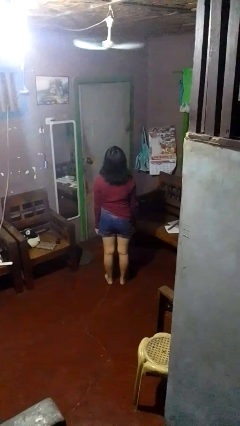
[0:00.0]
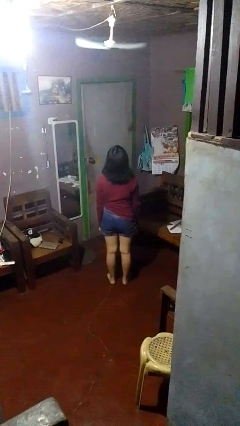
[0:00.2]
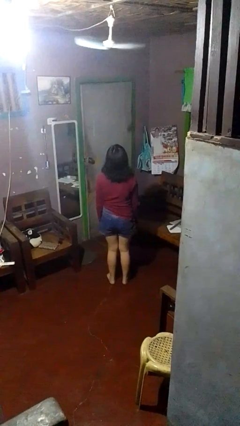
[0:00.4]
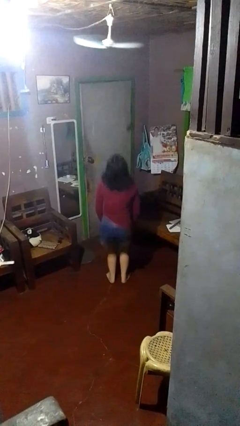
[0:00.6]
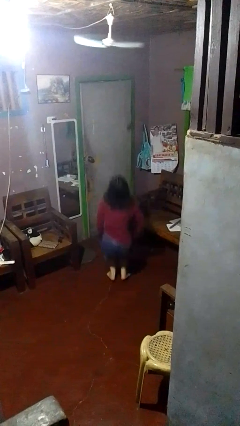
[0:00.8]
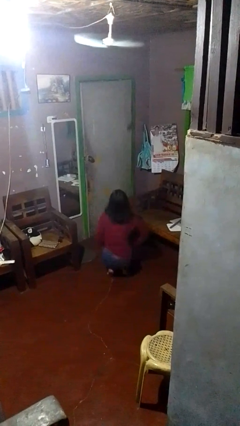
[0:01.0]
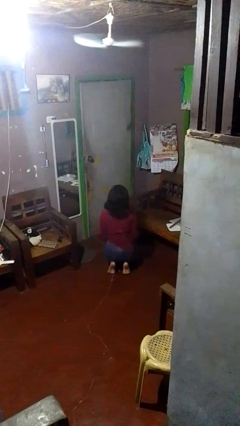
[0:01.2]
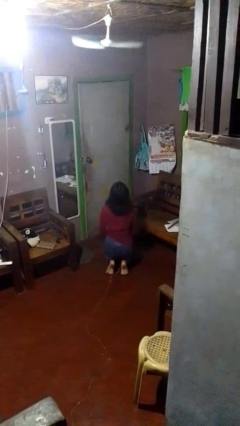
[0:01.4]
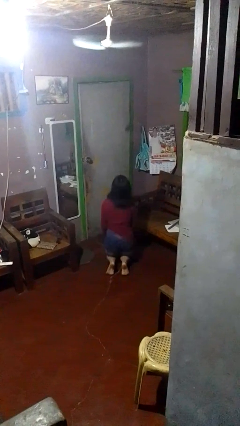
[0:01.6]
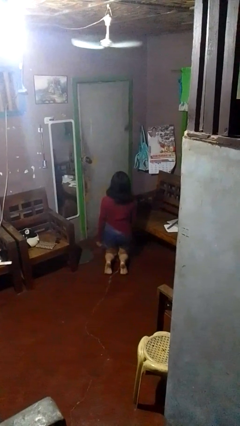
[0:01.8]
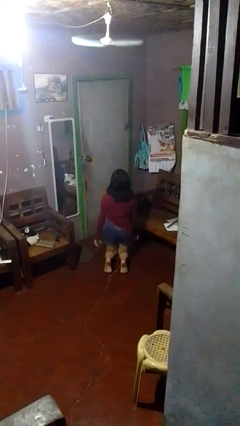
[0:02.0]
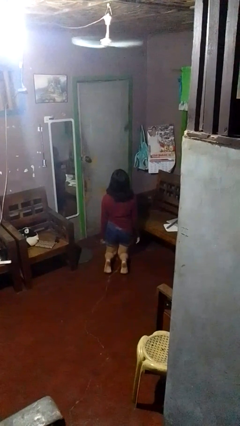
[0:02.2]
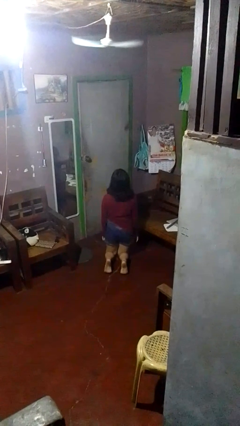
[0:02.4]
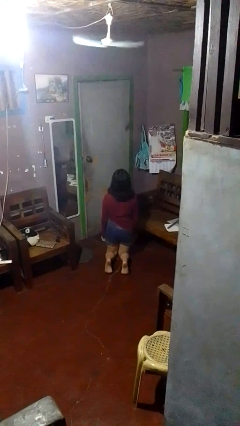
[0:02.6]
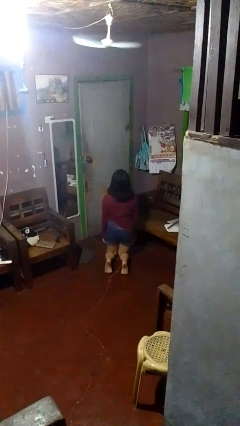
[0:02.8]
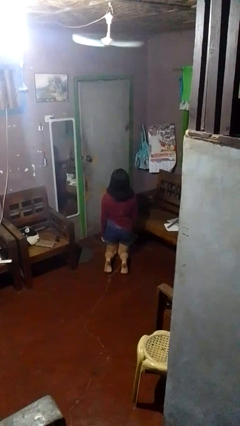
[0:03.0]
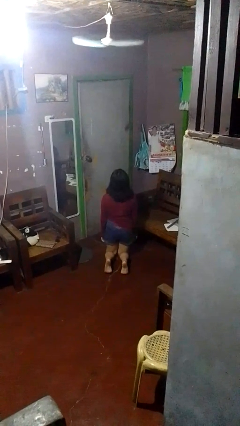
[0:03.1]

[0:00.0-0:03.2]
person kneels

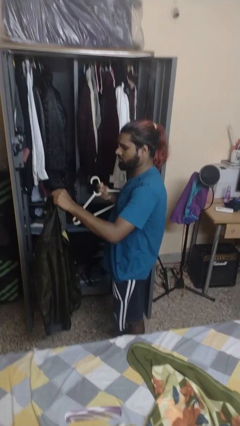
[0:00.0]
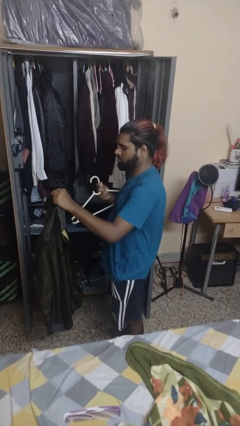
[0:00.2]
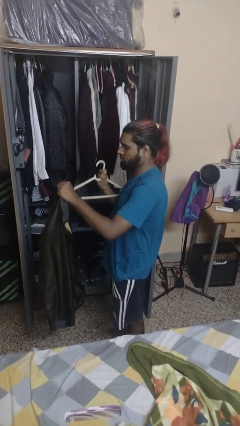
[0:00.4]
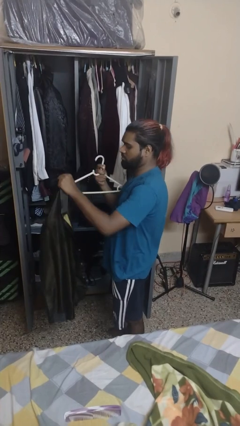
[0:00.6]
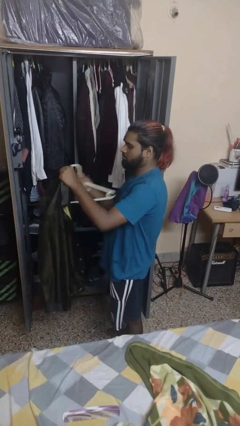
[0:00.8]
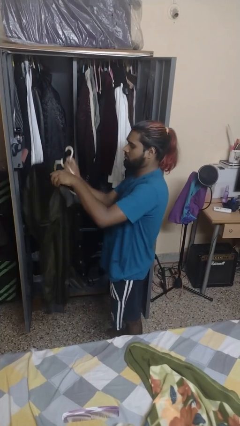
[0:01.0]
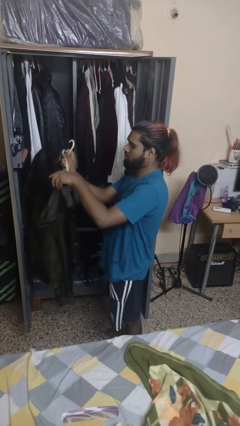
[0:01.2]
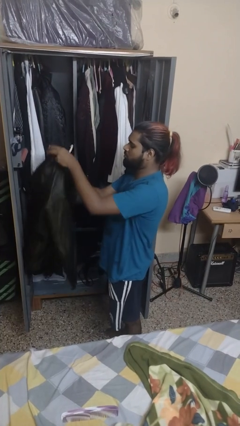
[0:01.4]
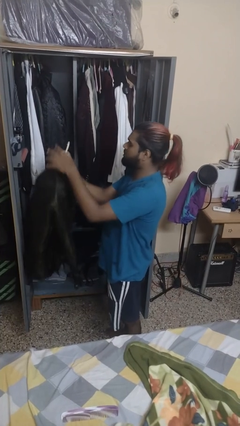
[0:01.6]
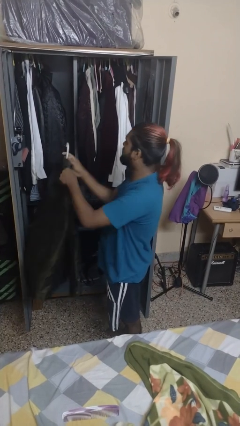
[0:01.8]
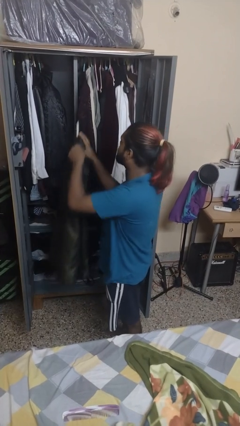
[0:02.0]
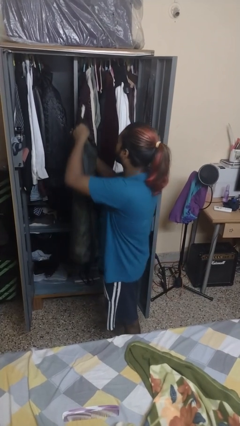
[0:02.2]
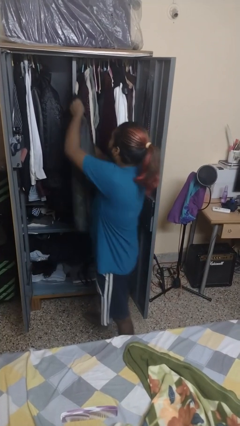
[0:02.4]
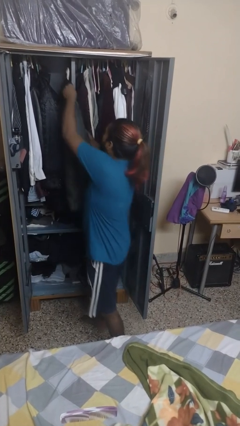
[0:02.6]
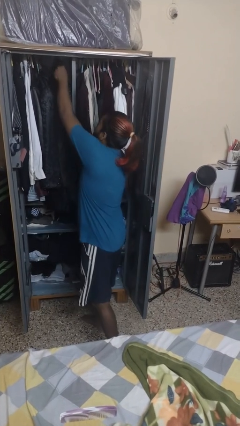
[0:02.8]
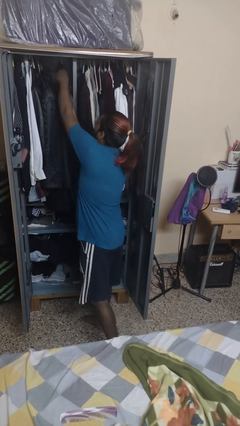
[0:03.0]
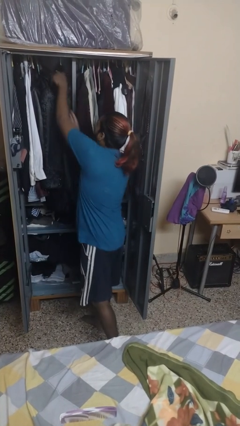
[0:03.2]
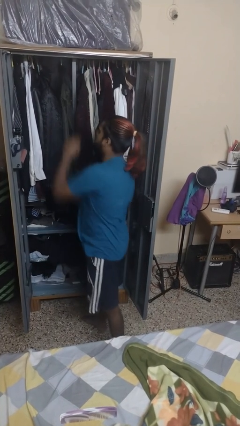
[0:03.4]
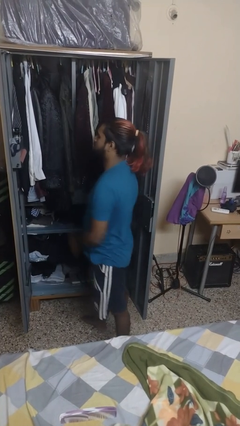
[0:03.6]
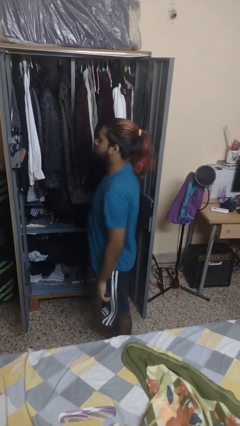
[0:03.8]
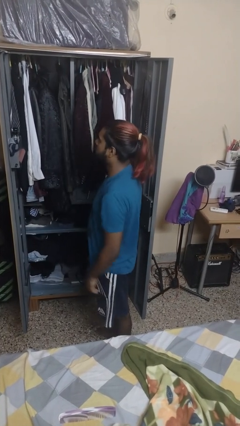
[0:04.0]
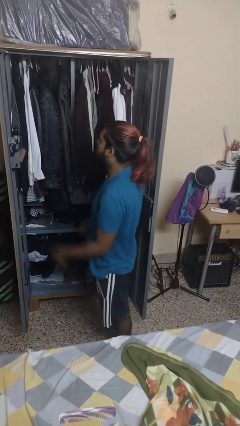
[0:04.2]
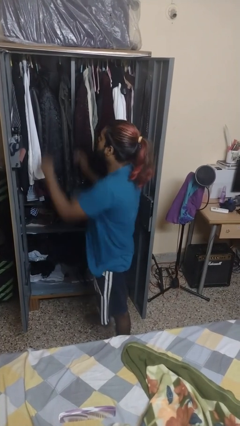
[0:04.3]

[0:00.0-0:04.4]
person puts clothes into dresser

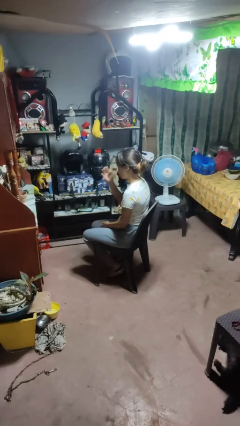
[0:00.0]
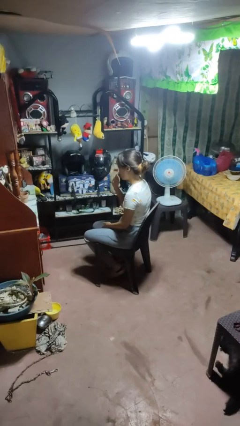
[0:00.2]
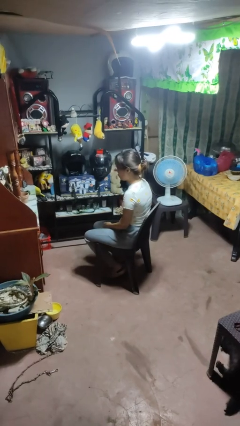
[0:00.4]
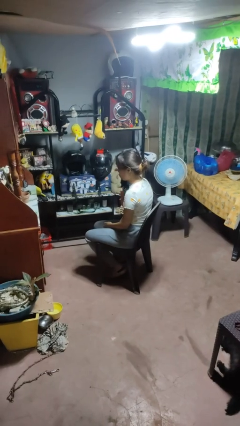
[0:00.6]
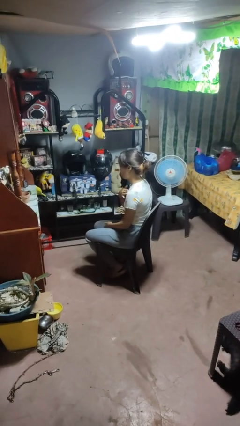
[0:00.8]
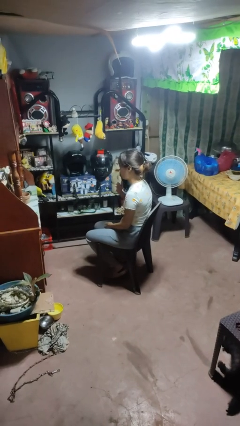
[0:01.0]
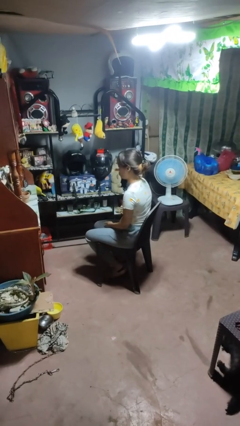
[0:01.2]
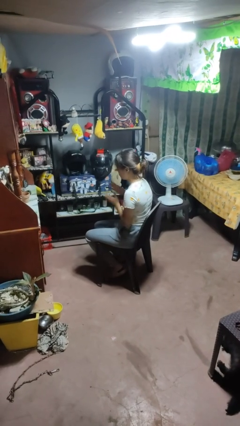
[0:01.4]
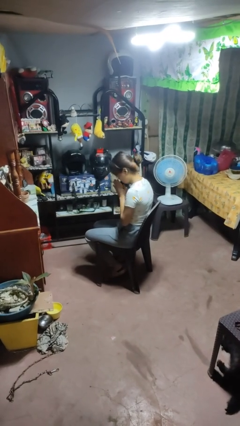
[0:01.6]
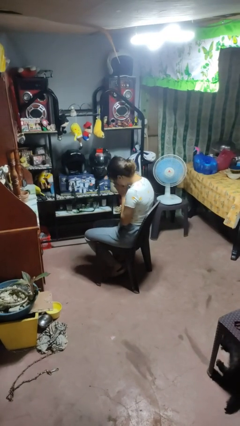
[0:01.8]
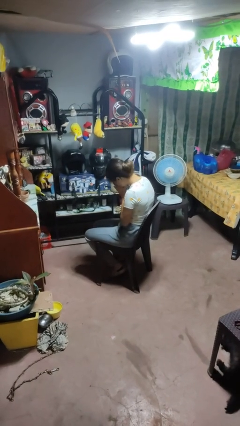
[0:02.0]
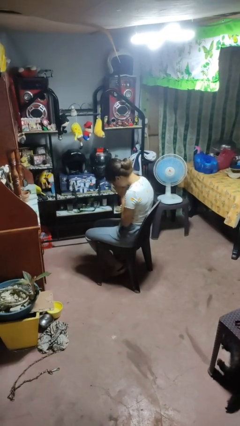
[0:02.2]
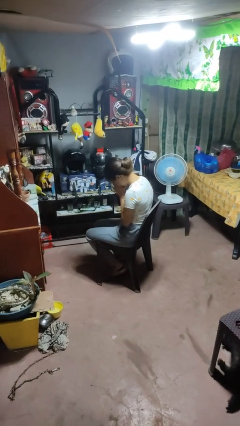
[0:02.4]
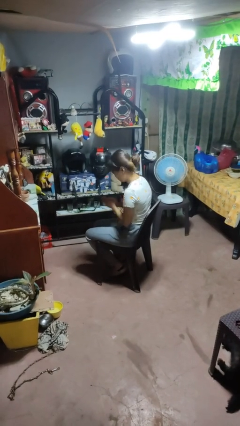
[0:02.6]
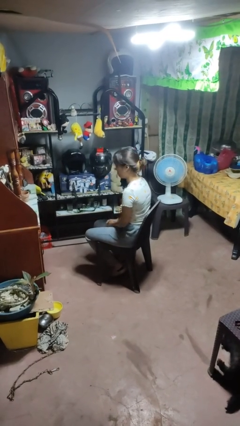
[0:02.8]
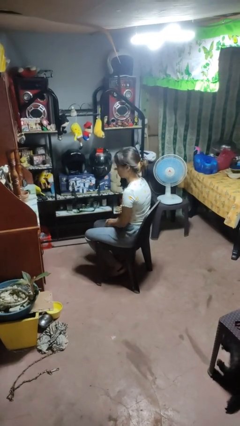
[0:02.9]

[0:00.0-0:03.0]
person prays

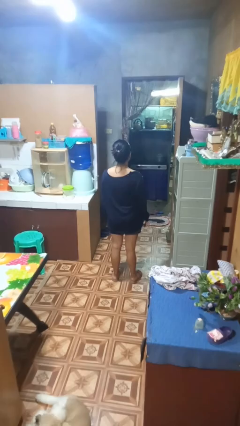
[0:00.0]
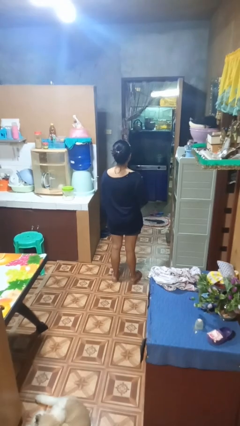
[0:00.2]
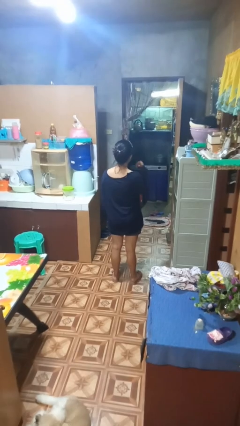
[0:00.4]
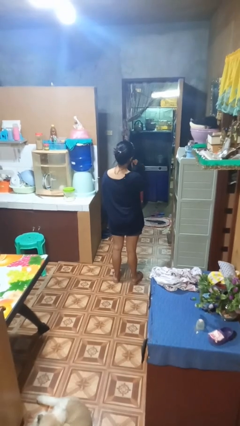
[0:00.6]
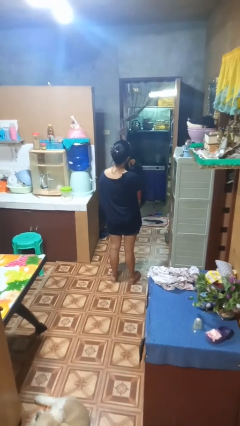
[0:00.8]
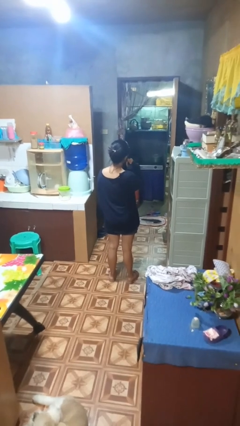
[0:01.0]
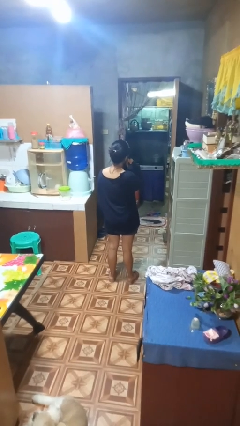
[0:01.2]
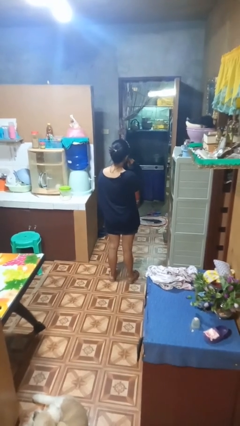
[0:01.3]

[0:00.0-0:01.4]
person gestures call me

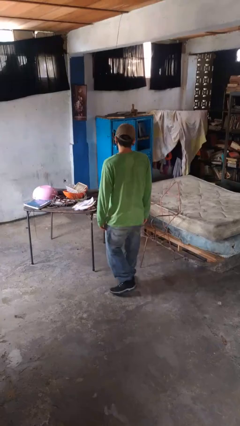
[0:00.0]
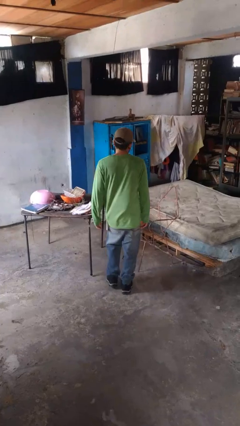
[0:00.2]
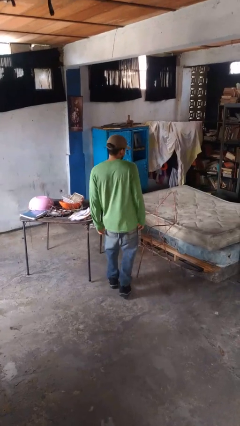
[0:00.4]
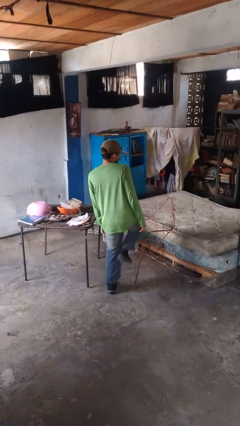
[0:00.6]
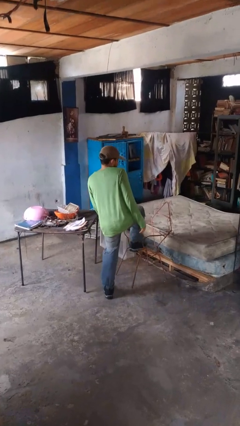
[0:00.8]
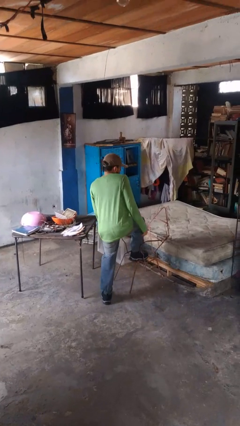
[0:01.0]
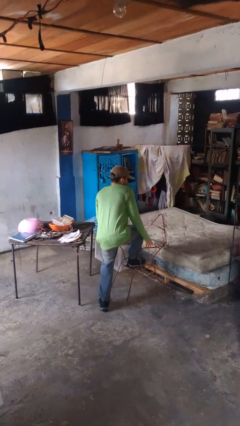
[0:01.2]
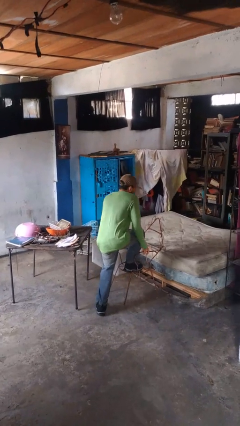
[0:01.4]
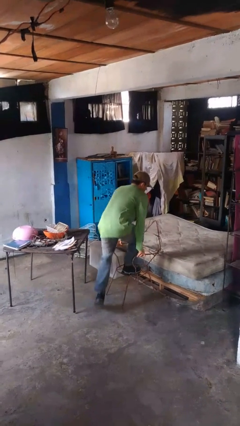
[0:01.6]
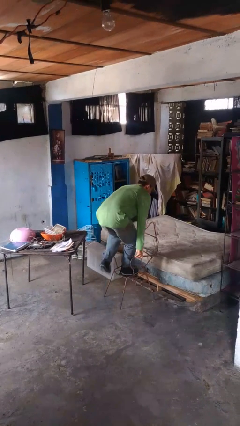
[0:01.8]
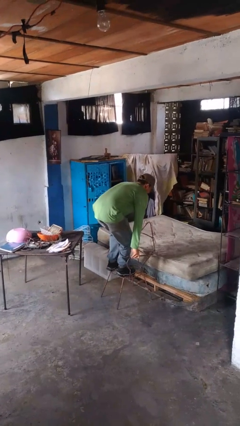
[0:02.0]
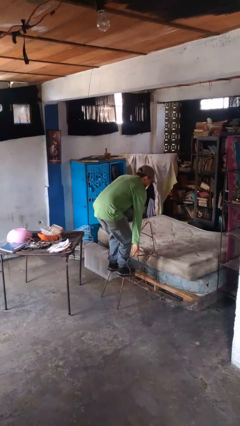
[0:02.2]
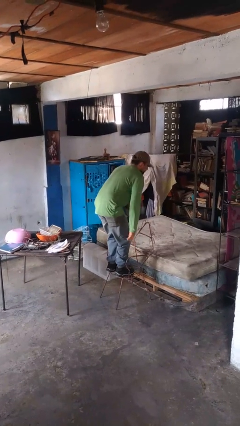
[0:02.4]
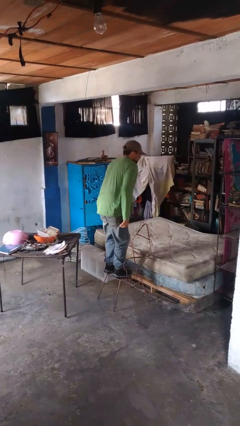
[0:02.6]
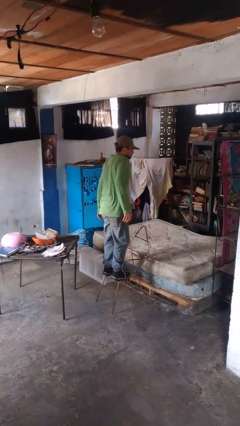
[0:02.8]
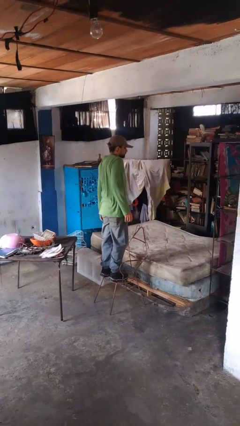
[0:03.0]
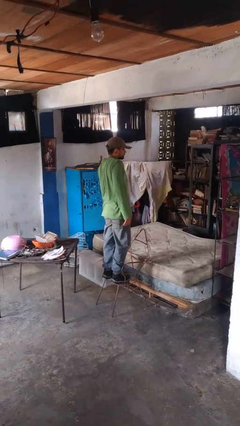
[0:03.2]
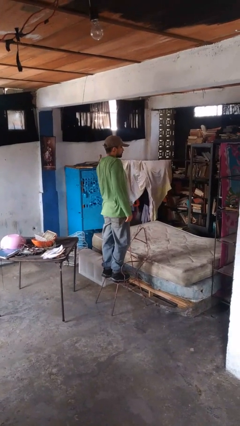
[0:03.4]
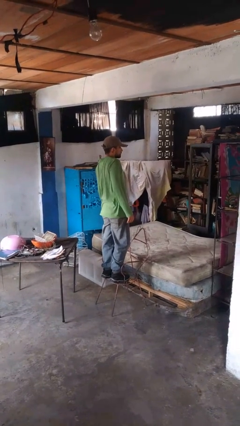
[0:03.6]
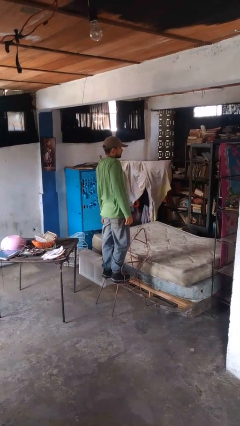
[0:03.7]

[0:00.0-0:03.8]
person climbs on chair

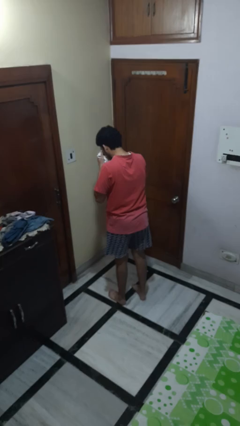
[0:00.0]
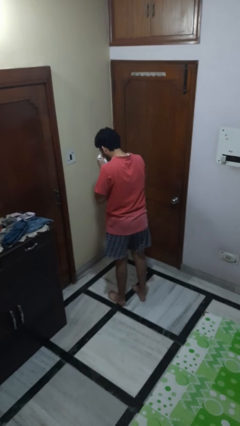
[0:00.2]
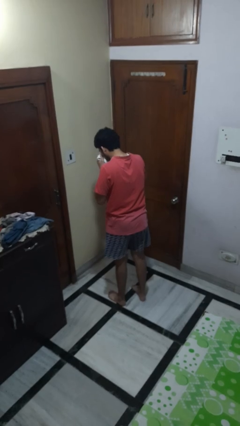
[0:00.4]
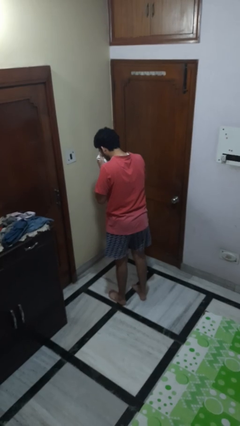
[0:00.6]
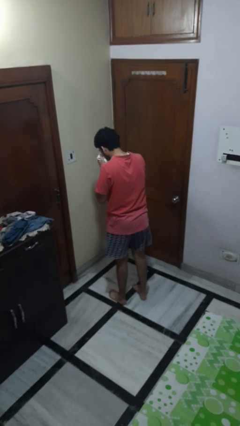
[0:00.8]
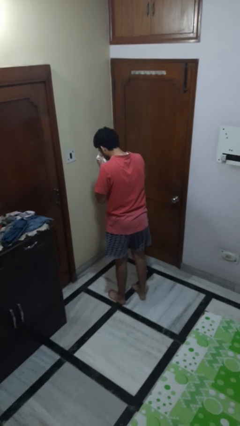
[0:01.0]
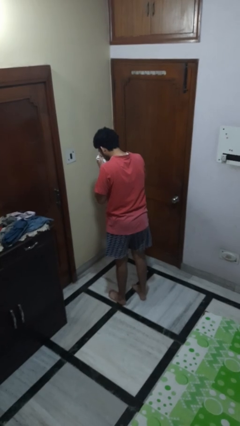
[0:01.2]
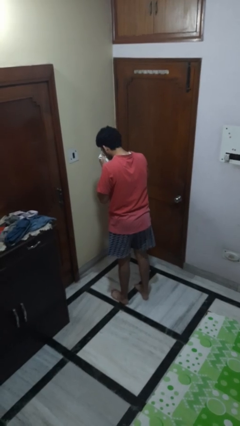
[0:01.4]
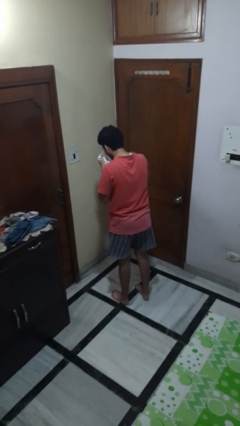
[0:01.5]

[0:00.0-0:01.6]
person blows nose
